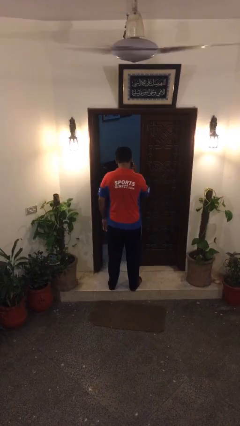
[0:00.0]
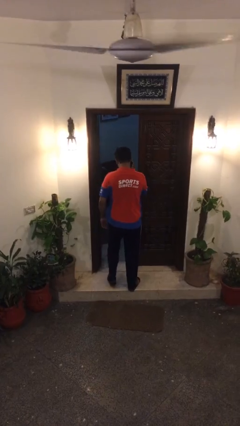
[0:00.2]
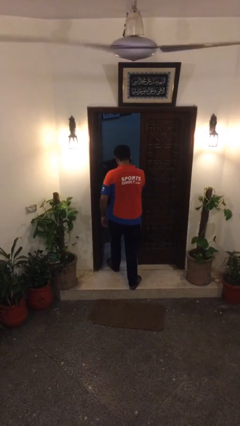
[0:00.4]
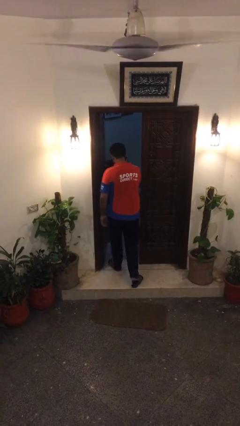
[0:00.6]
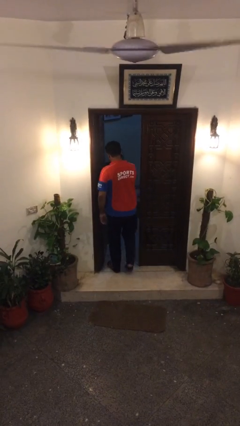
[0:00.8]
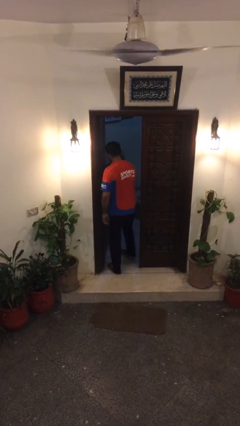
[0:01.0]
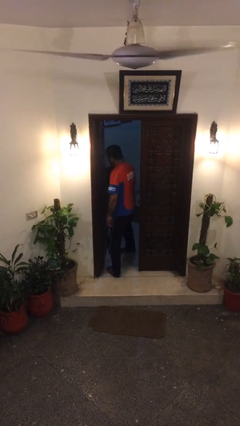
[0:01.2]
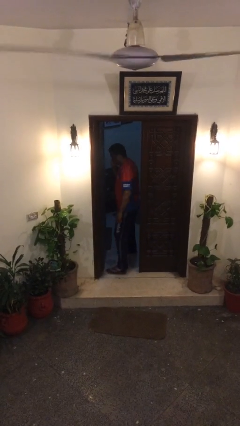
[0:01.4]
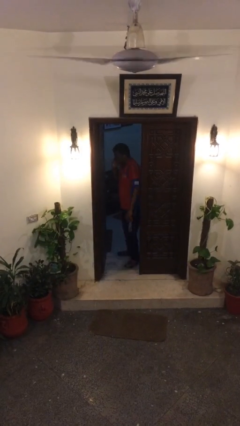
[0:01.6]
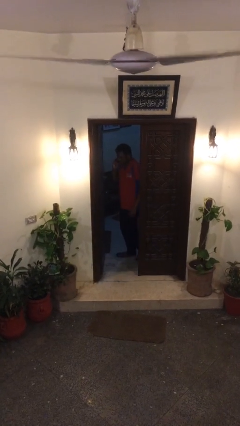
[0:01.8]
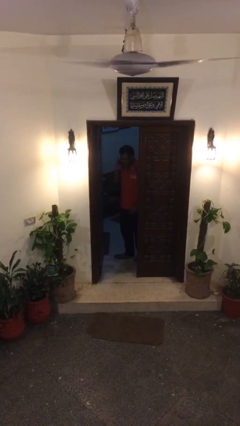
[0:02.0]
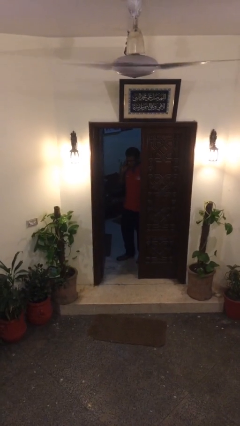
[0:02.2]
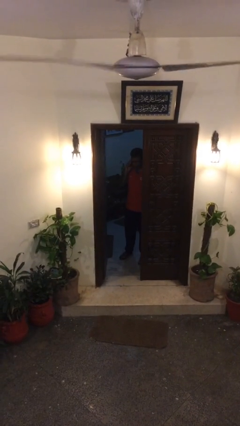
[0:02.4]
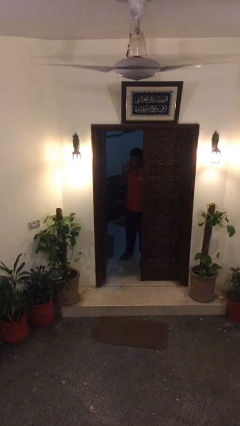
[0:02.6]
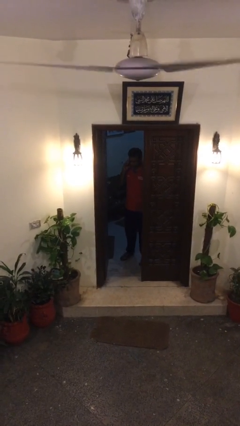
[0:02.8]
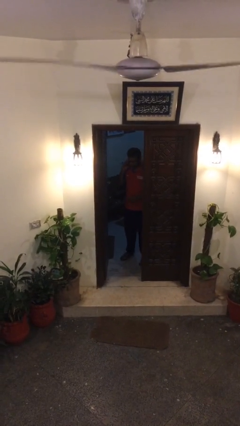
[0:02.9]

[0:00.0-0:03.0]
person exits scene through structure

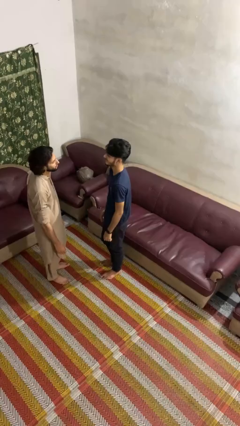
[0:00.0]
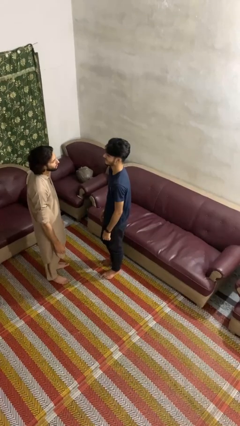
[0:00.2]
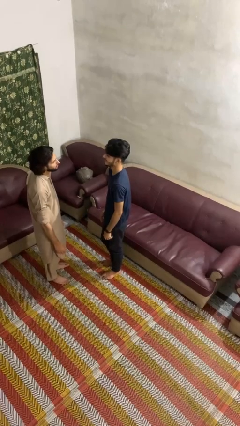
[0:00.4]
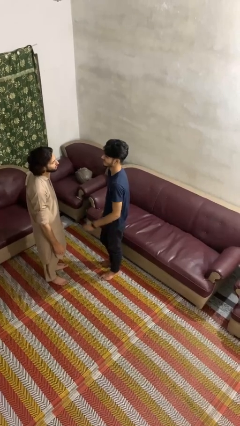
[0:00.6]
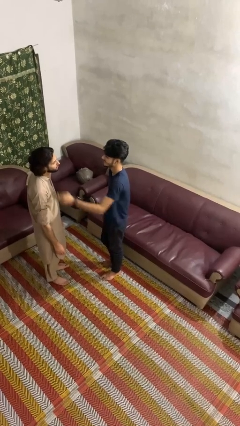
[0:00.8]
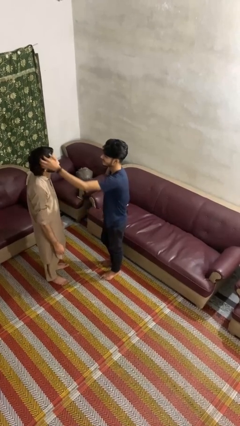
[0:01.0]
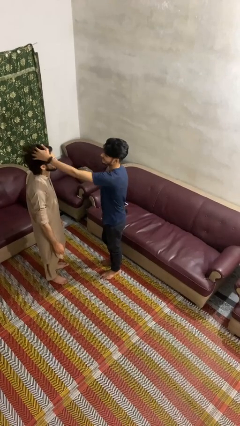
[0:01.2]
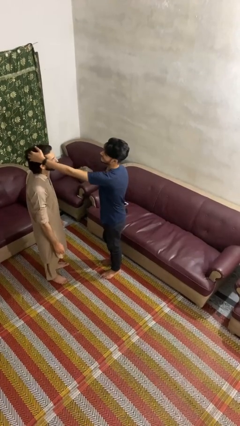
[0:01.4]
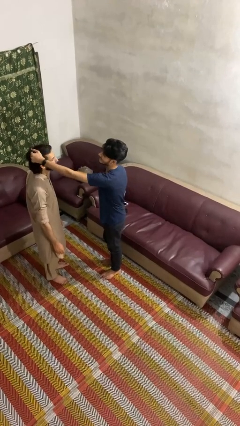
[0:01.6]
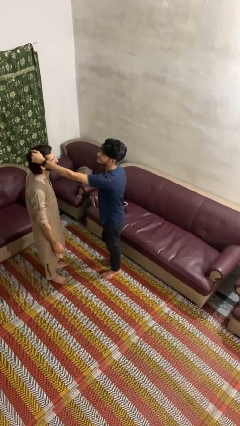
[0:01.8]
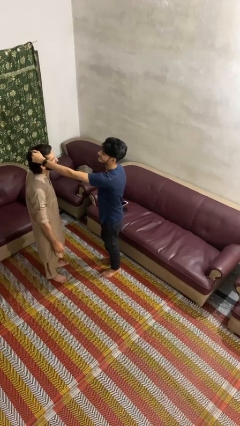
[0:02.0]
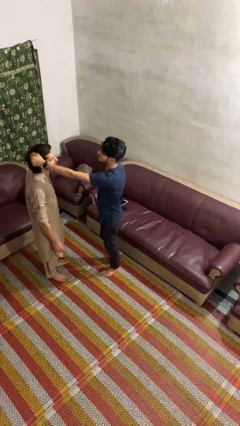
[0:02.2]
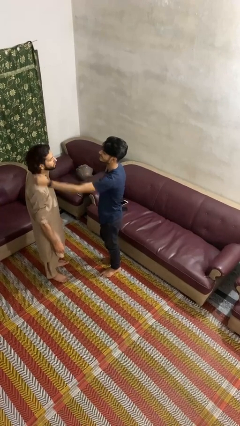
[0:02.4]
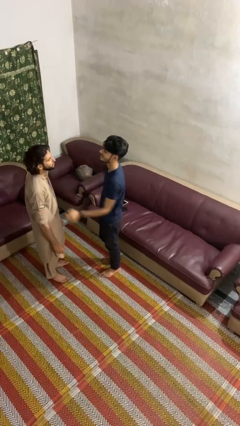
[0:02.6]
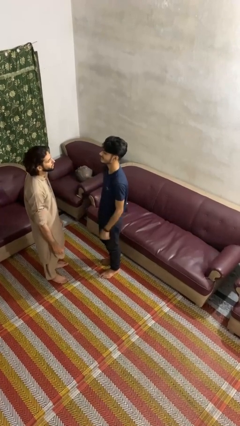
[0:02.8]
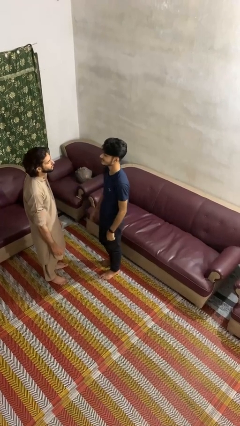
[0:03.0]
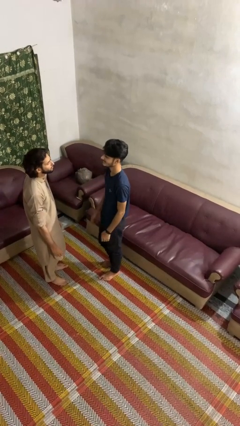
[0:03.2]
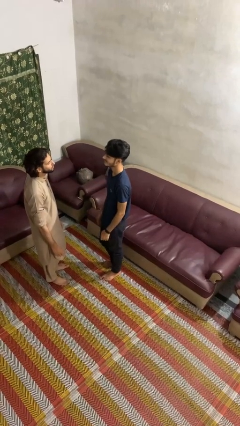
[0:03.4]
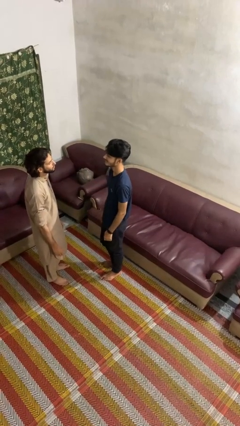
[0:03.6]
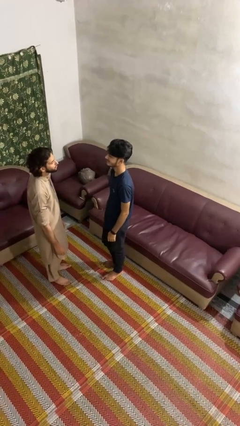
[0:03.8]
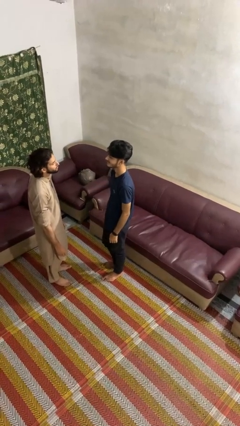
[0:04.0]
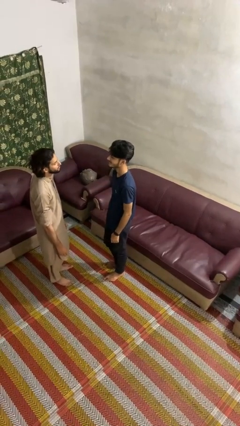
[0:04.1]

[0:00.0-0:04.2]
person grabs person by hair

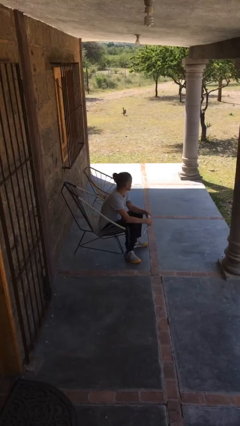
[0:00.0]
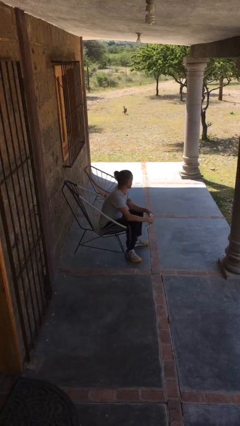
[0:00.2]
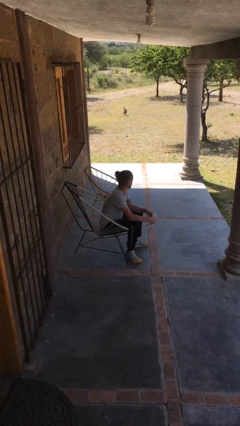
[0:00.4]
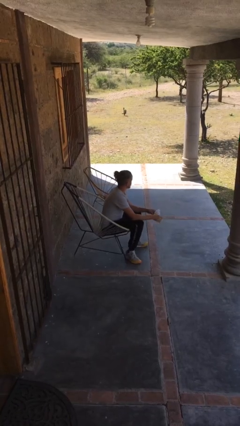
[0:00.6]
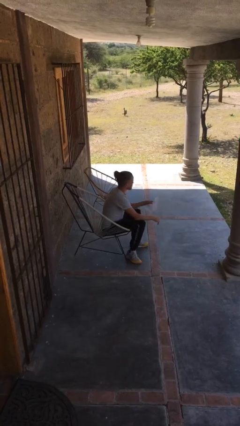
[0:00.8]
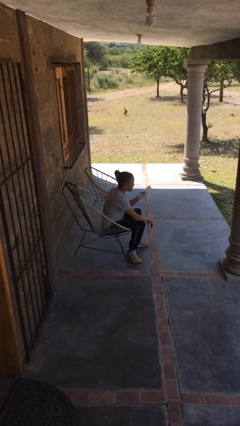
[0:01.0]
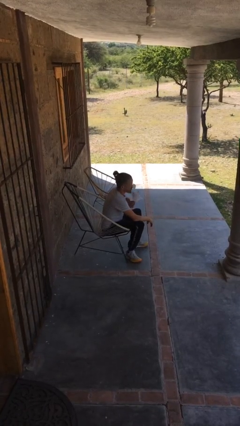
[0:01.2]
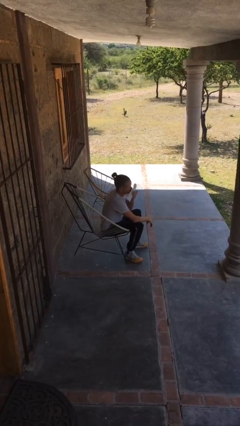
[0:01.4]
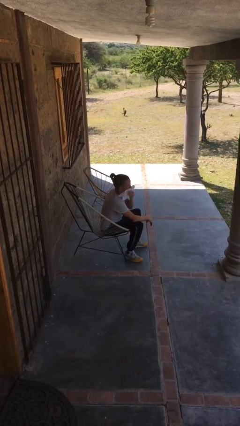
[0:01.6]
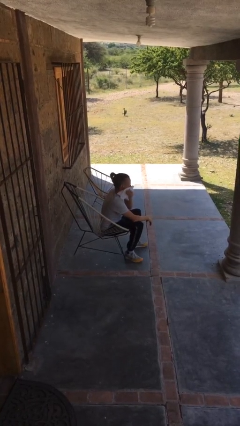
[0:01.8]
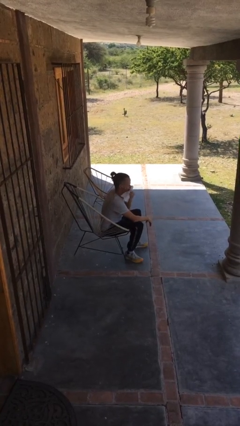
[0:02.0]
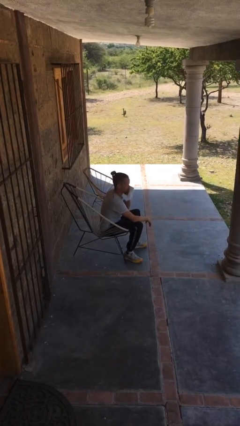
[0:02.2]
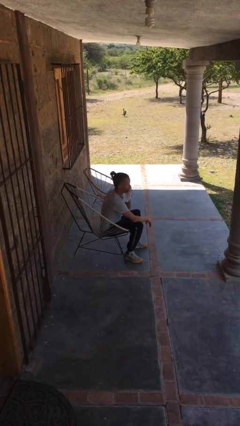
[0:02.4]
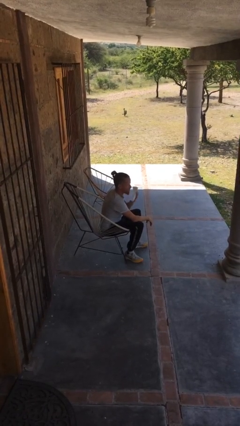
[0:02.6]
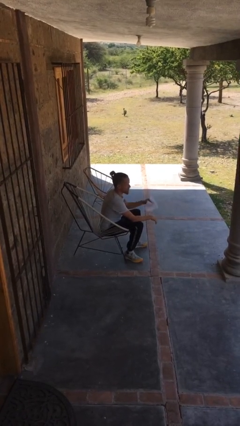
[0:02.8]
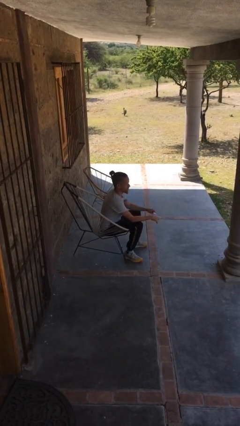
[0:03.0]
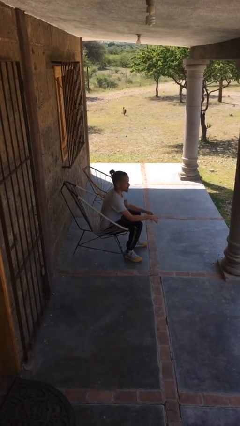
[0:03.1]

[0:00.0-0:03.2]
person wipes mouth with napkin

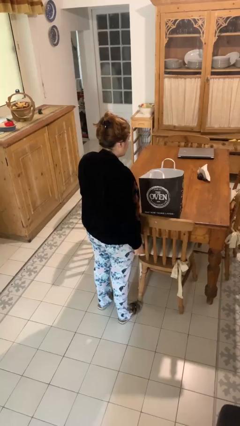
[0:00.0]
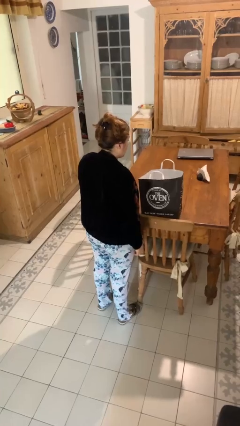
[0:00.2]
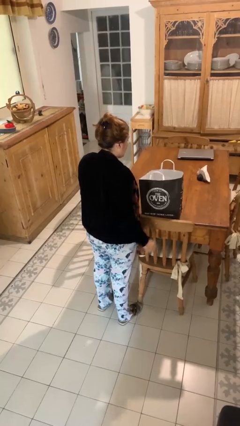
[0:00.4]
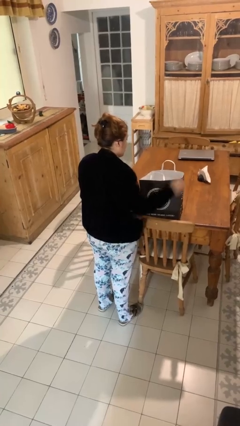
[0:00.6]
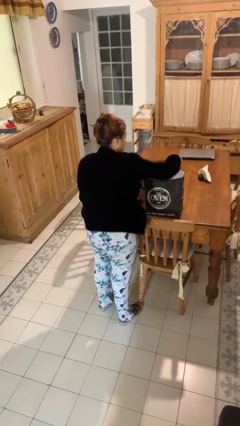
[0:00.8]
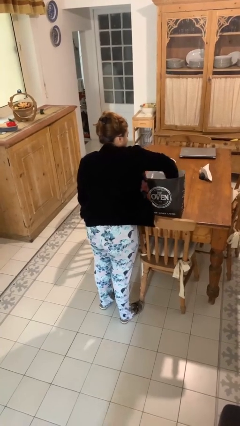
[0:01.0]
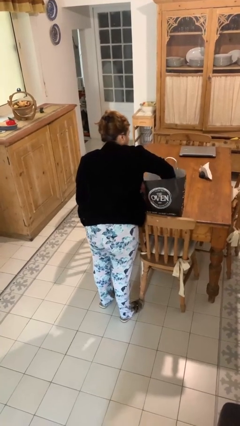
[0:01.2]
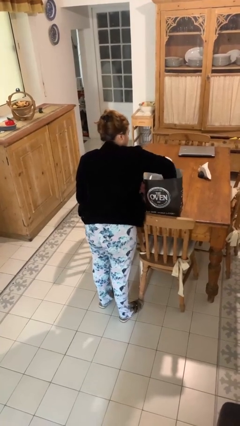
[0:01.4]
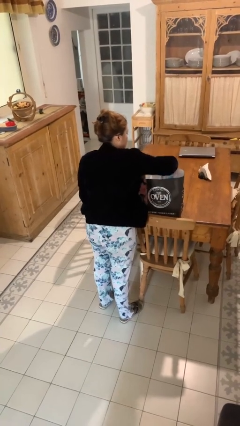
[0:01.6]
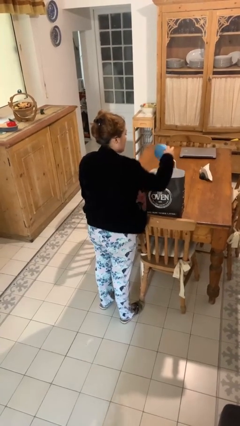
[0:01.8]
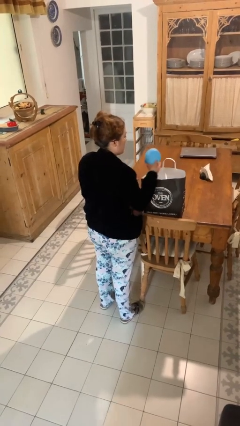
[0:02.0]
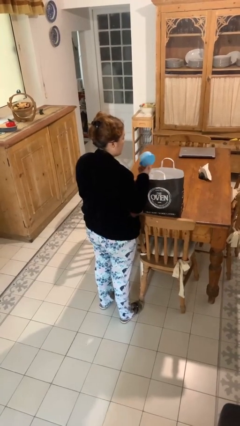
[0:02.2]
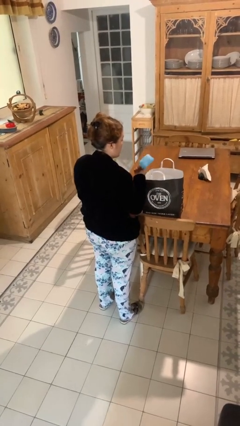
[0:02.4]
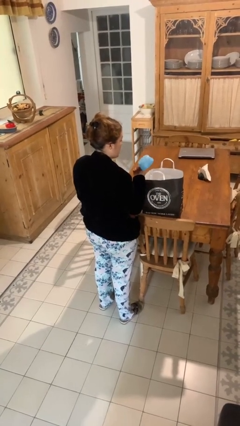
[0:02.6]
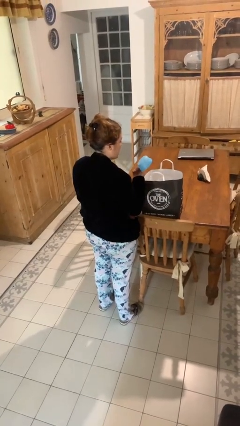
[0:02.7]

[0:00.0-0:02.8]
person takes object from bag

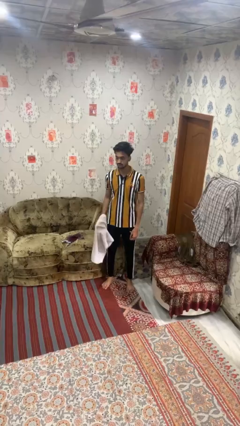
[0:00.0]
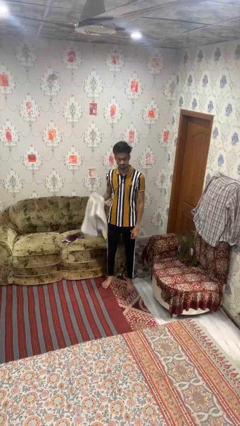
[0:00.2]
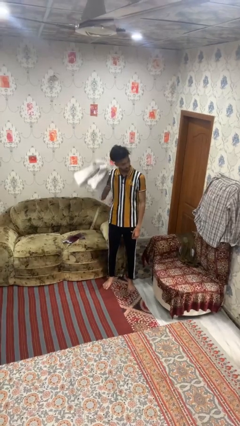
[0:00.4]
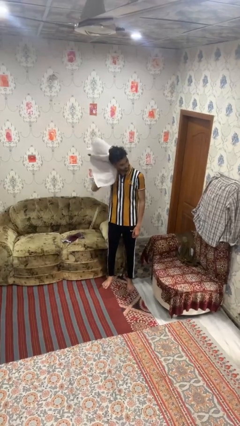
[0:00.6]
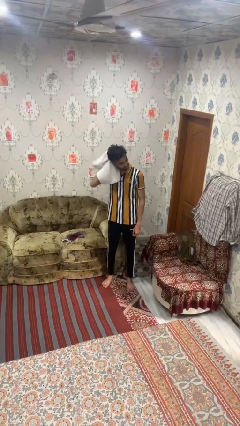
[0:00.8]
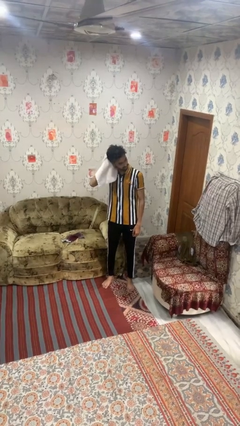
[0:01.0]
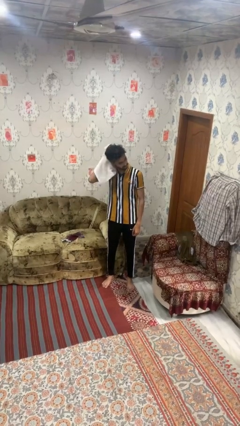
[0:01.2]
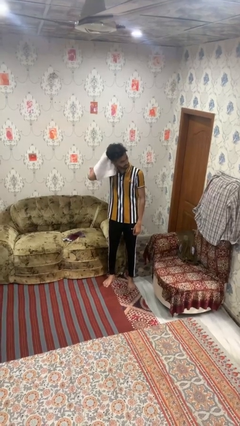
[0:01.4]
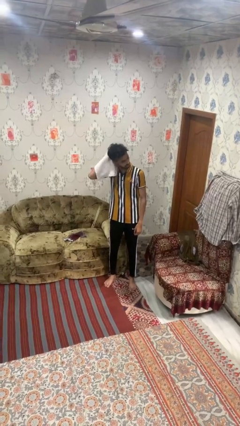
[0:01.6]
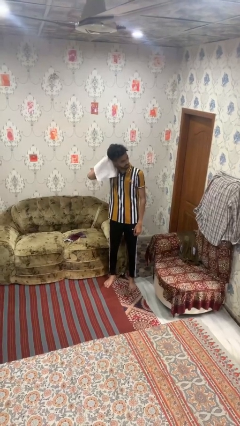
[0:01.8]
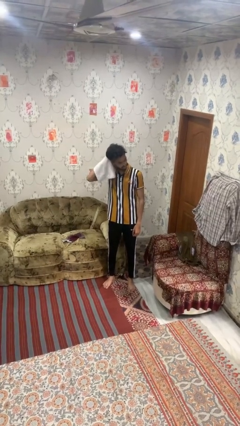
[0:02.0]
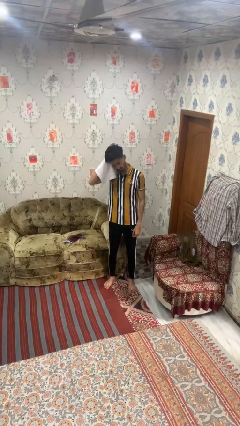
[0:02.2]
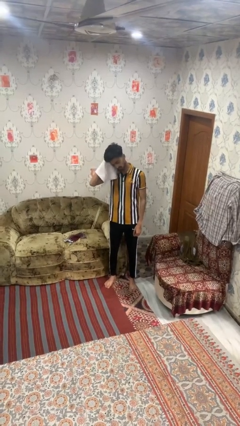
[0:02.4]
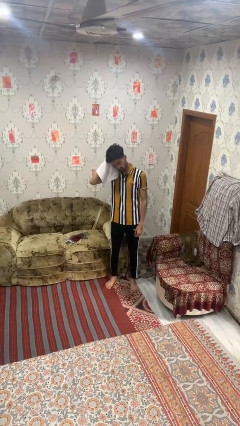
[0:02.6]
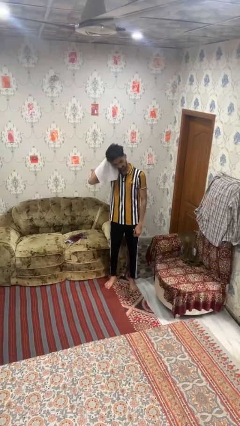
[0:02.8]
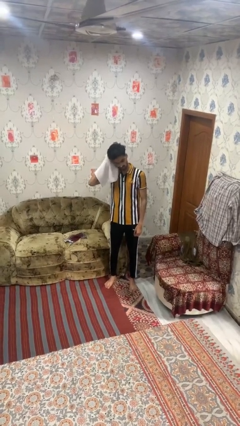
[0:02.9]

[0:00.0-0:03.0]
person dries hair with towel

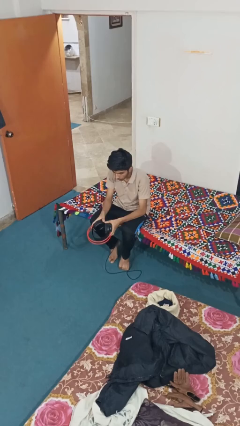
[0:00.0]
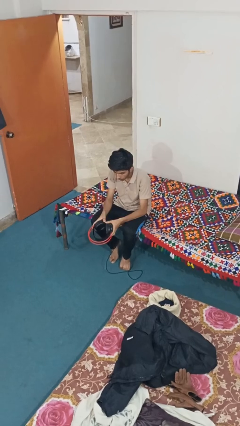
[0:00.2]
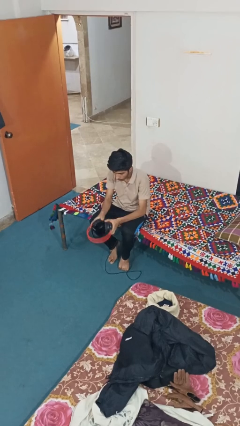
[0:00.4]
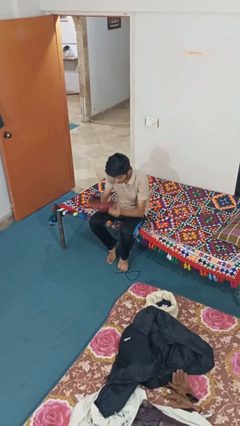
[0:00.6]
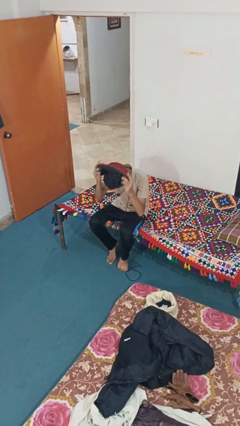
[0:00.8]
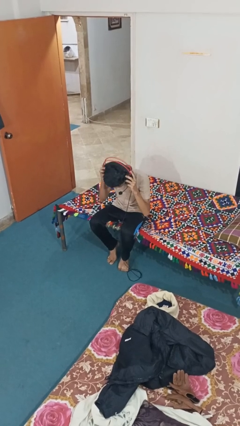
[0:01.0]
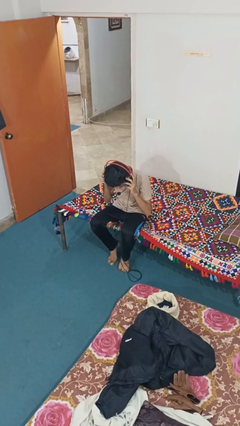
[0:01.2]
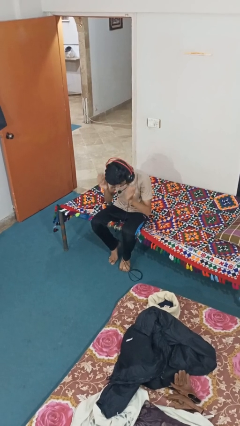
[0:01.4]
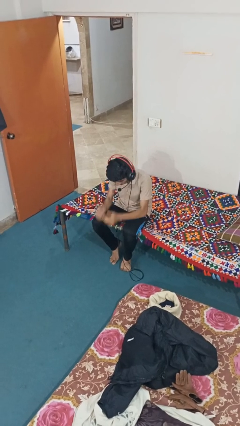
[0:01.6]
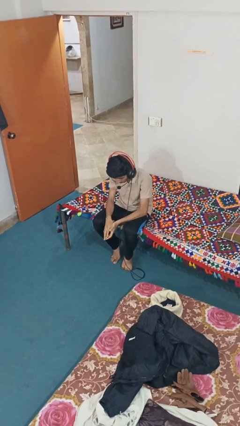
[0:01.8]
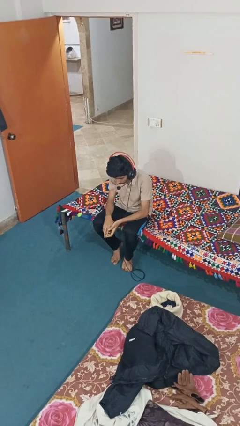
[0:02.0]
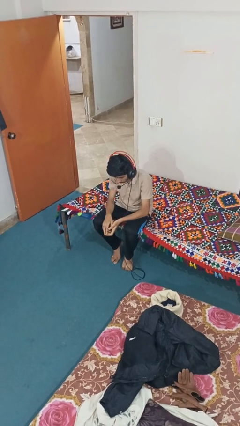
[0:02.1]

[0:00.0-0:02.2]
person puts on headphones
